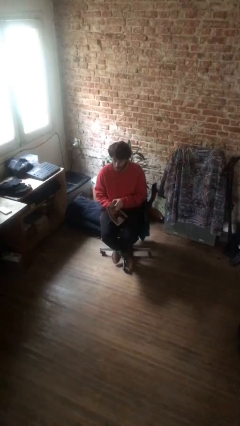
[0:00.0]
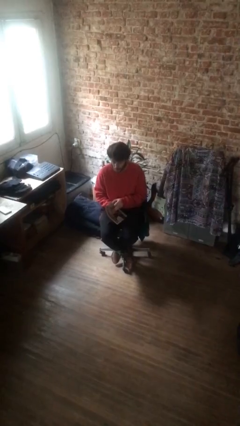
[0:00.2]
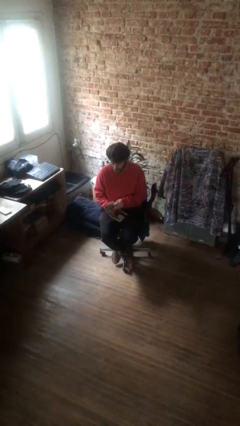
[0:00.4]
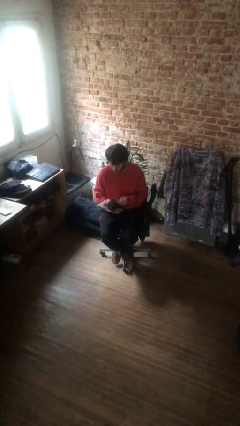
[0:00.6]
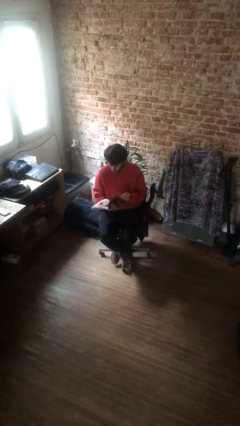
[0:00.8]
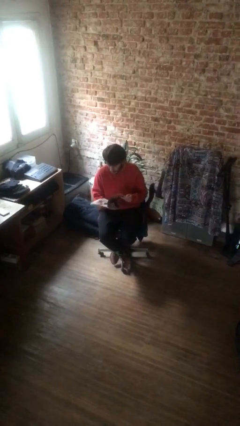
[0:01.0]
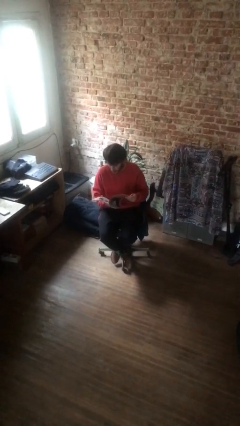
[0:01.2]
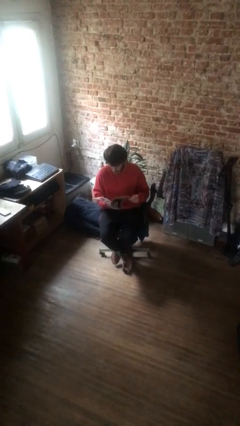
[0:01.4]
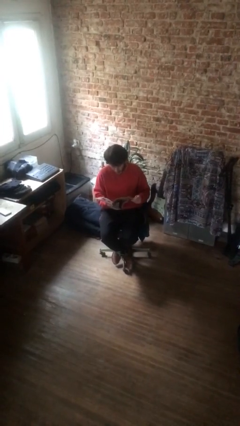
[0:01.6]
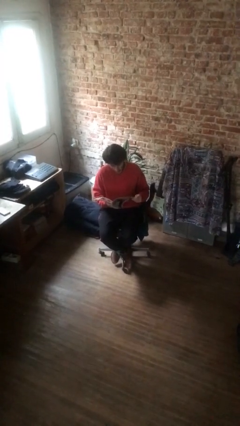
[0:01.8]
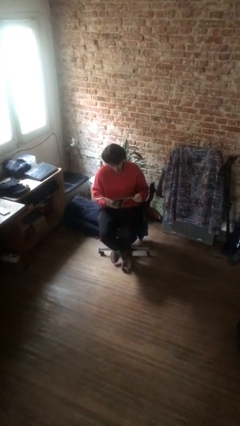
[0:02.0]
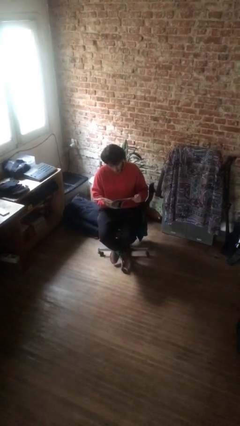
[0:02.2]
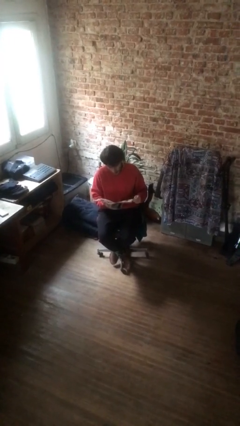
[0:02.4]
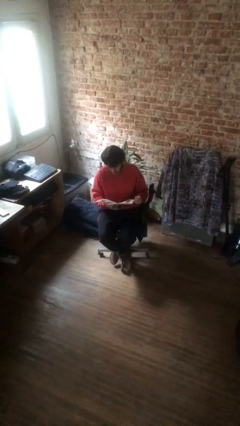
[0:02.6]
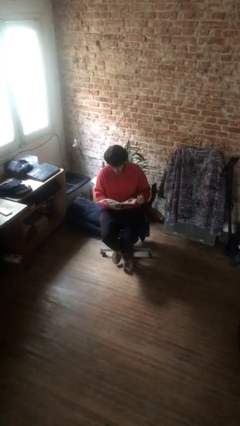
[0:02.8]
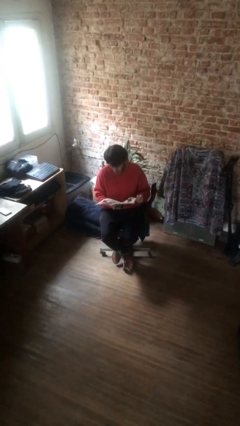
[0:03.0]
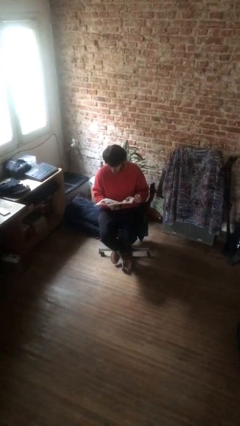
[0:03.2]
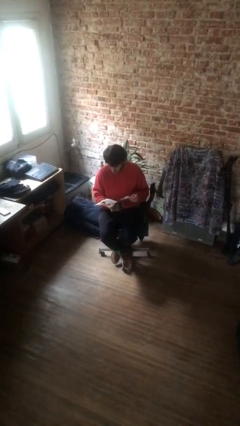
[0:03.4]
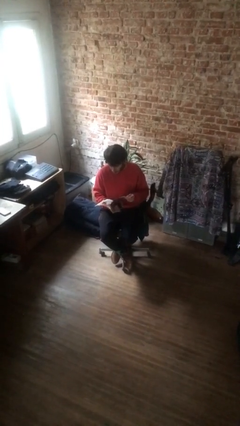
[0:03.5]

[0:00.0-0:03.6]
person reads magazine

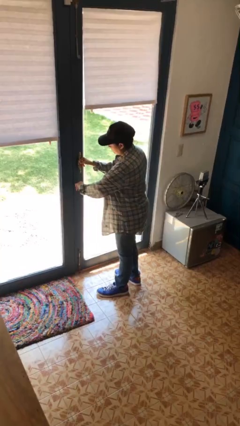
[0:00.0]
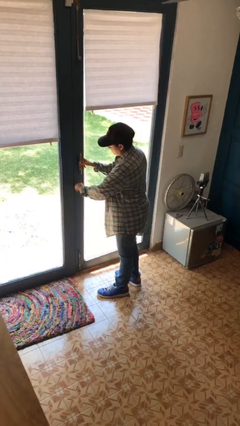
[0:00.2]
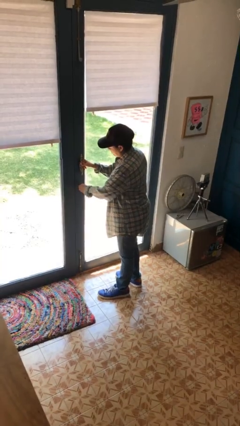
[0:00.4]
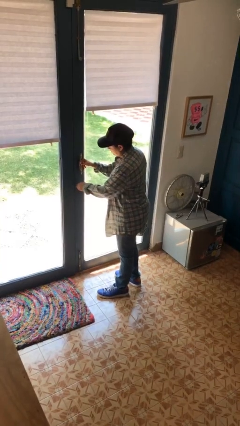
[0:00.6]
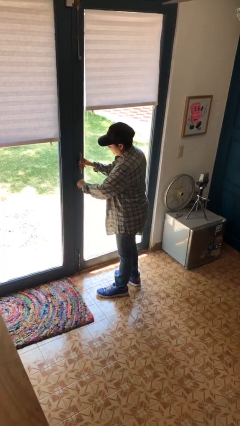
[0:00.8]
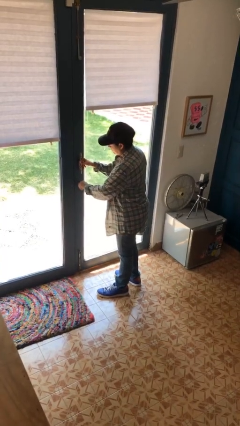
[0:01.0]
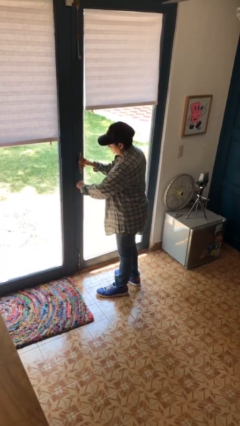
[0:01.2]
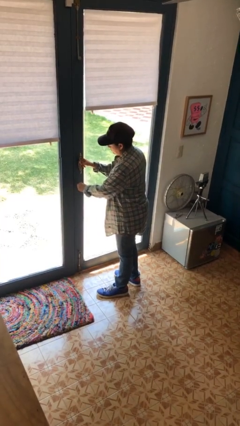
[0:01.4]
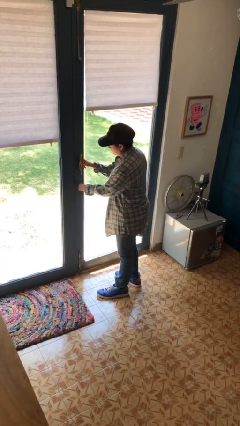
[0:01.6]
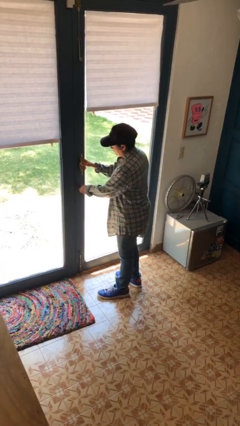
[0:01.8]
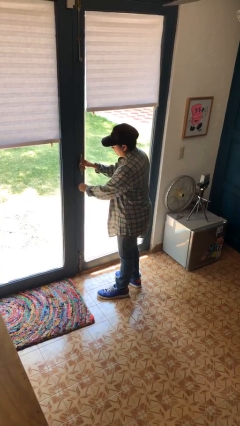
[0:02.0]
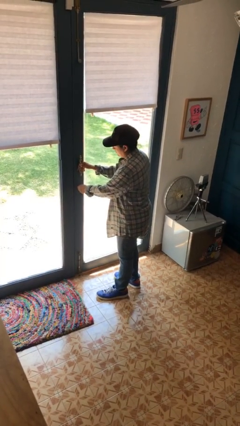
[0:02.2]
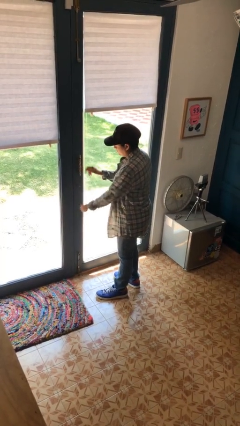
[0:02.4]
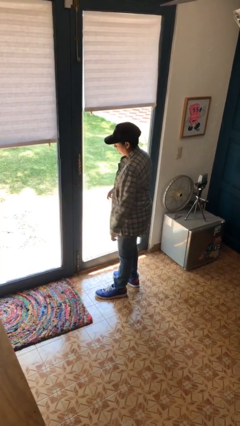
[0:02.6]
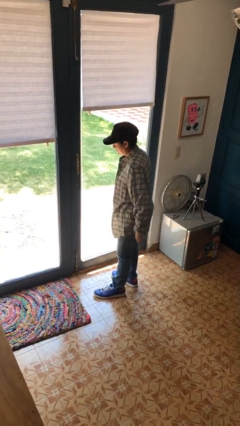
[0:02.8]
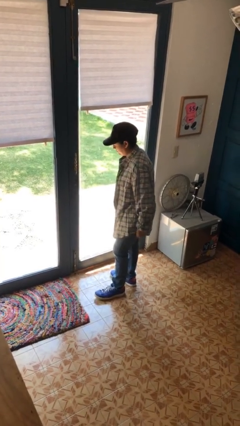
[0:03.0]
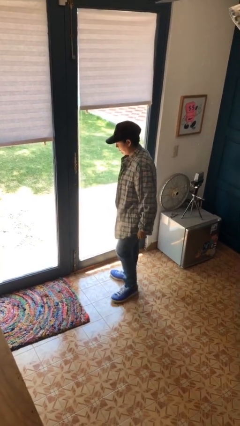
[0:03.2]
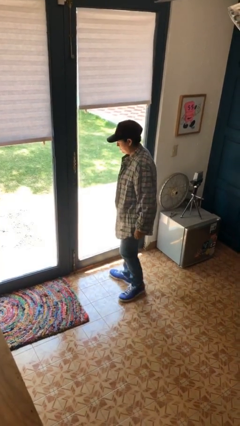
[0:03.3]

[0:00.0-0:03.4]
person locks door with keys

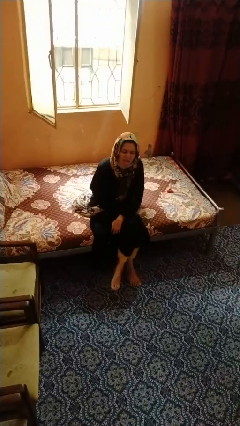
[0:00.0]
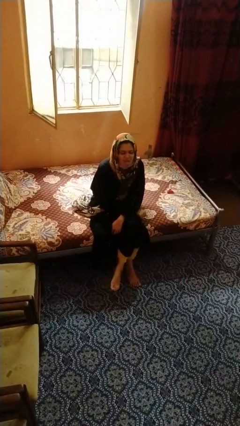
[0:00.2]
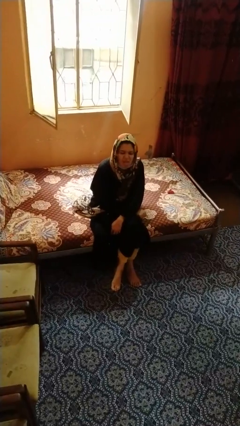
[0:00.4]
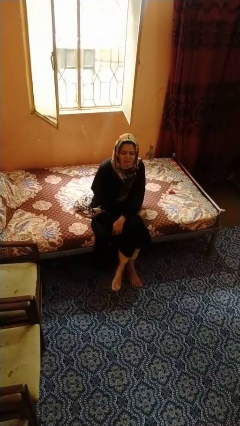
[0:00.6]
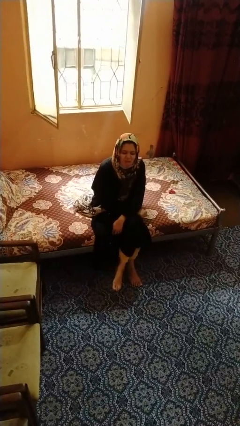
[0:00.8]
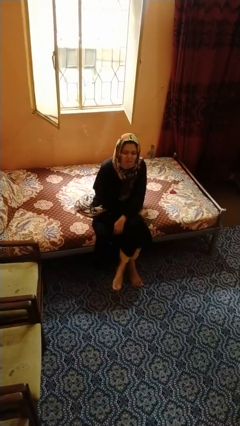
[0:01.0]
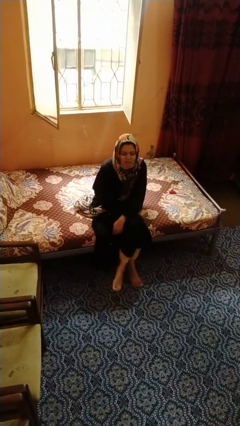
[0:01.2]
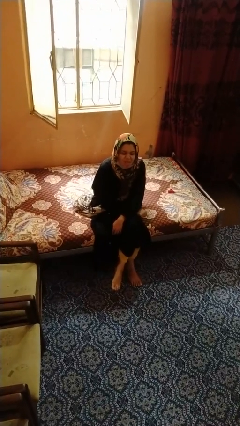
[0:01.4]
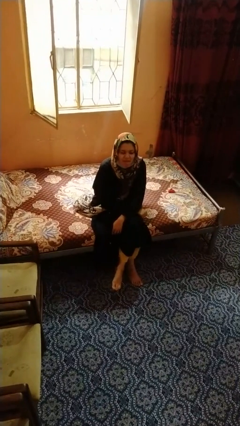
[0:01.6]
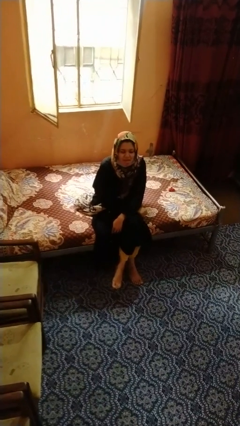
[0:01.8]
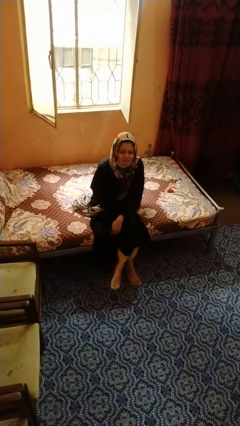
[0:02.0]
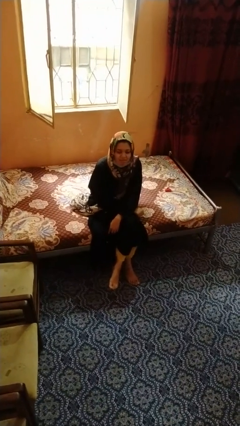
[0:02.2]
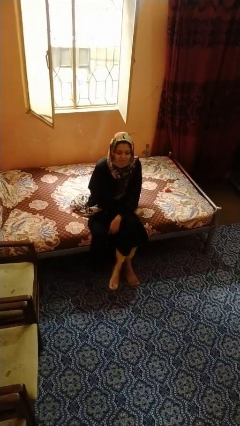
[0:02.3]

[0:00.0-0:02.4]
person sticks out tongue

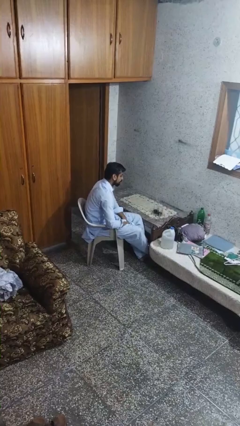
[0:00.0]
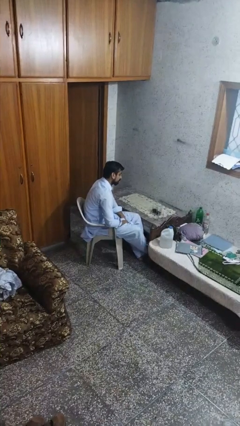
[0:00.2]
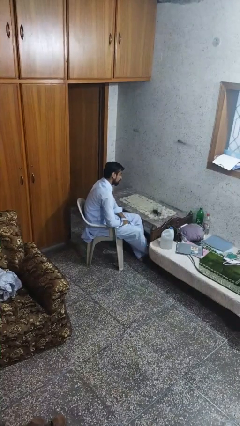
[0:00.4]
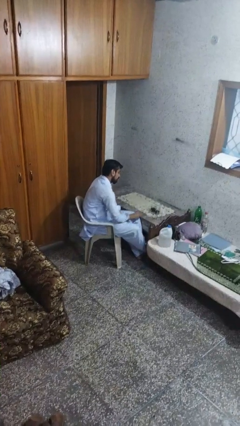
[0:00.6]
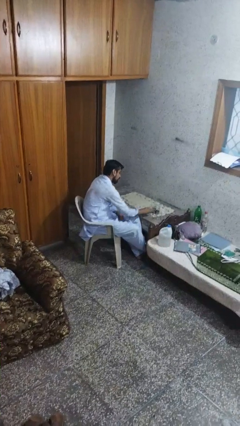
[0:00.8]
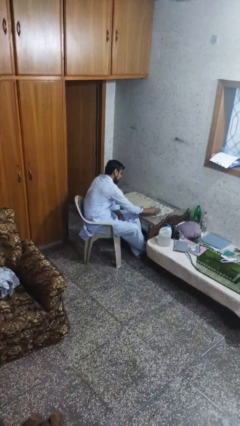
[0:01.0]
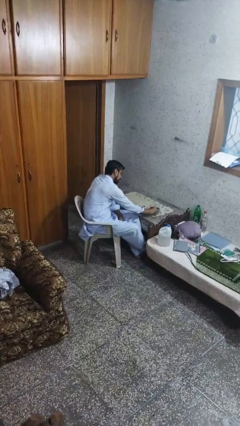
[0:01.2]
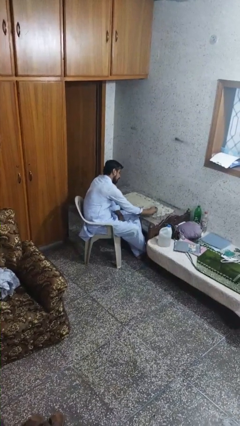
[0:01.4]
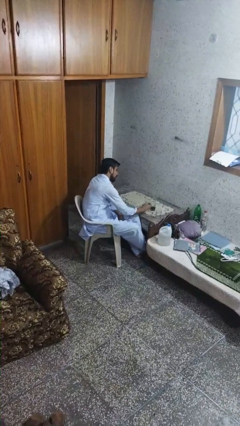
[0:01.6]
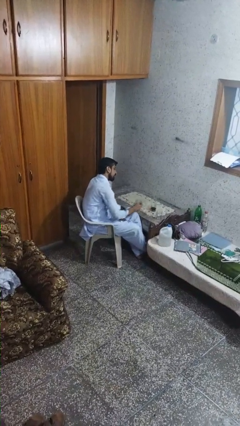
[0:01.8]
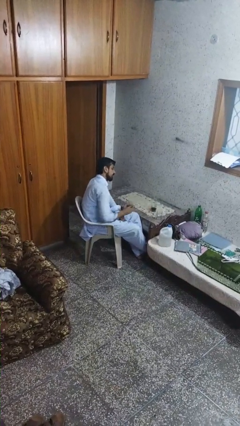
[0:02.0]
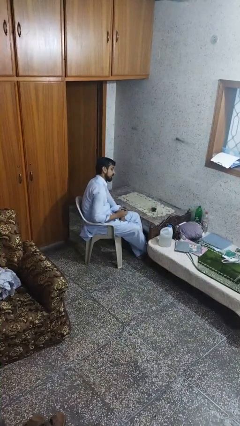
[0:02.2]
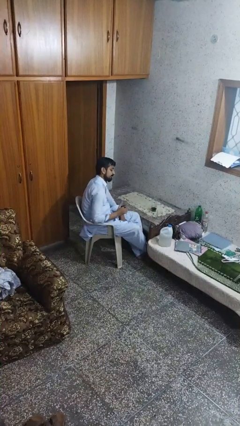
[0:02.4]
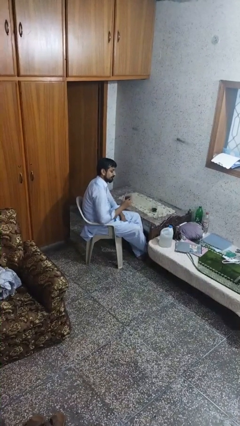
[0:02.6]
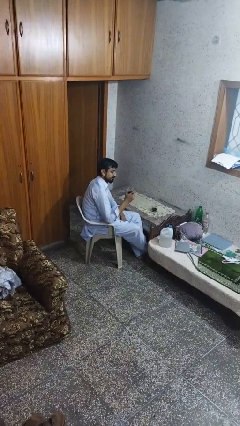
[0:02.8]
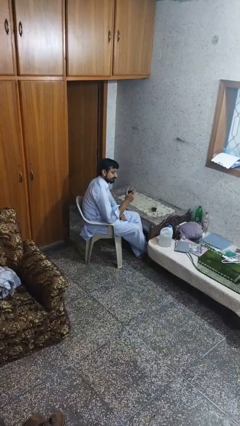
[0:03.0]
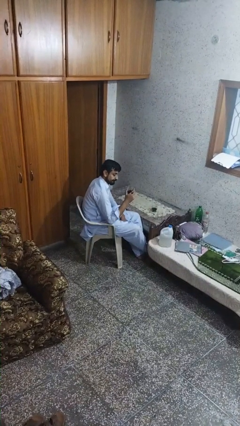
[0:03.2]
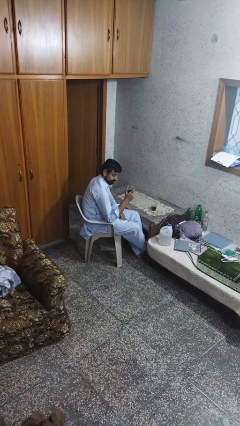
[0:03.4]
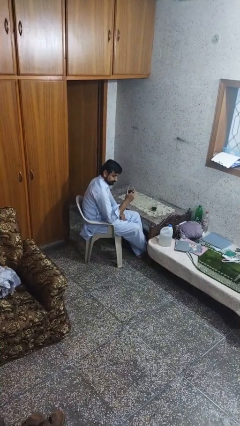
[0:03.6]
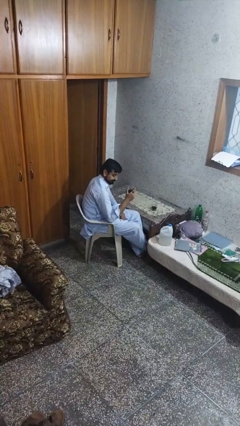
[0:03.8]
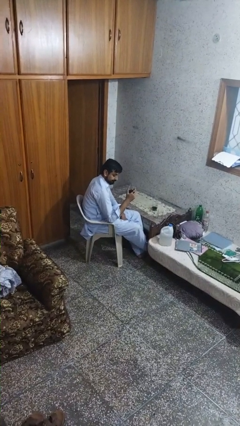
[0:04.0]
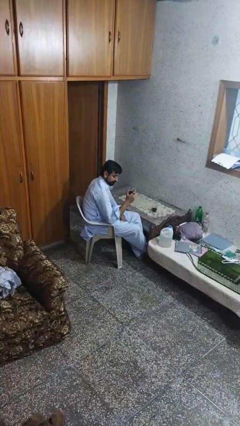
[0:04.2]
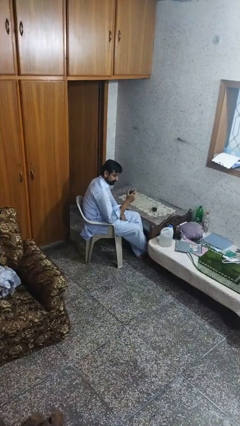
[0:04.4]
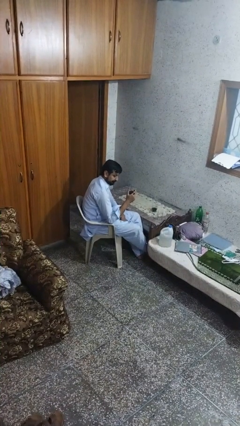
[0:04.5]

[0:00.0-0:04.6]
person picks up object from table

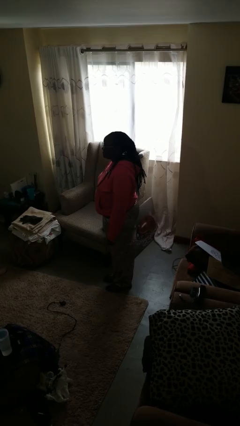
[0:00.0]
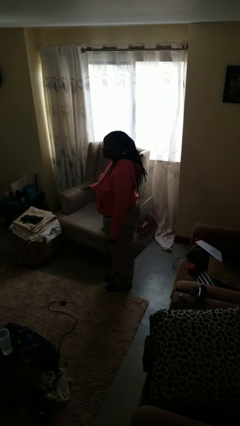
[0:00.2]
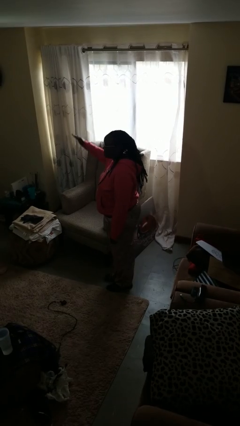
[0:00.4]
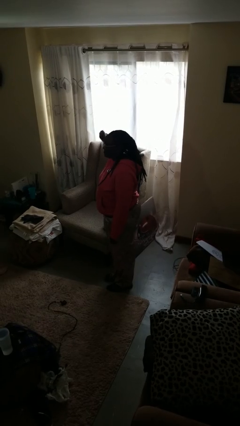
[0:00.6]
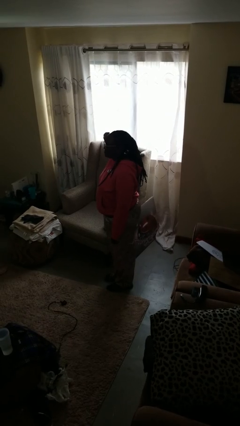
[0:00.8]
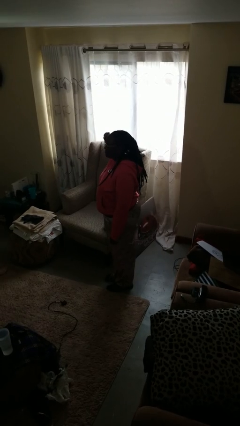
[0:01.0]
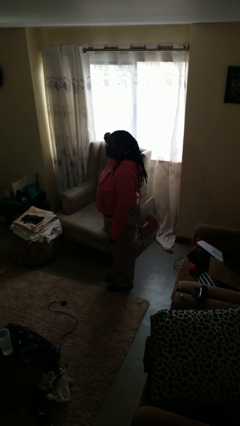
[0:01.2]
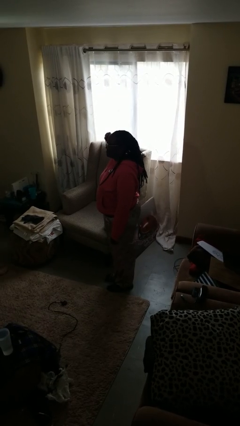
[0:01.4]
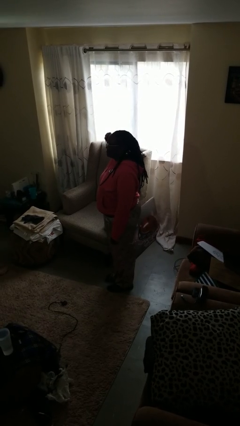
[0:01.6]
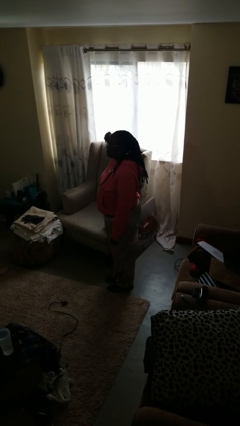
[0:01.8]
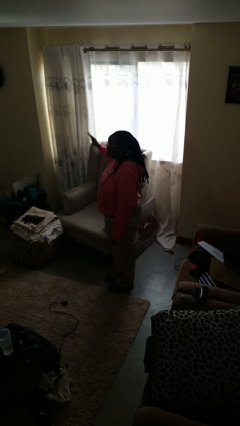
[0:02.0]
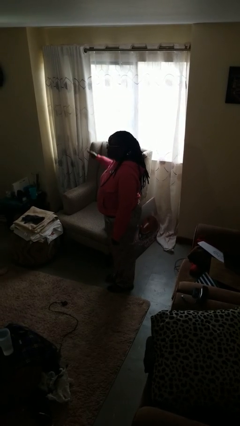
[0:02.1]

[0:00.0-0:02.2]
person salutes

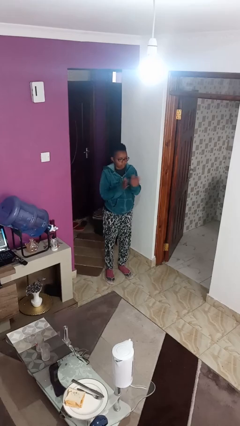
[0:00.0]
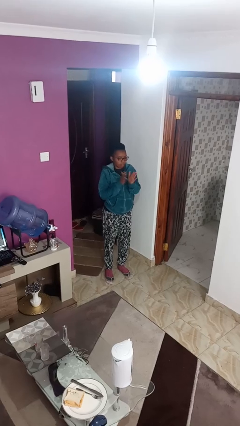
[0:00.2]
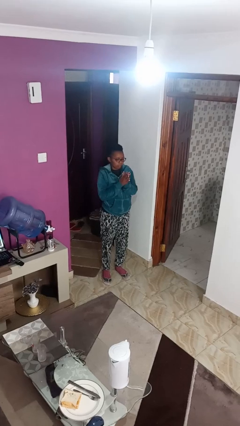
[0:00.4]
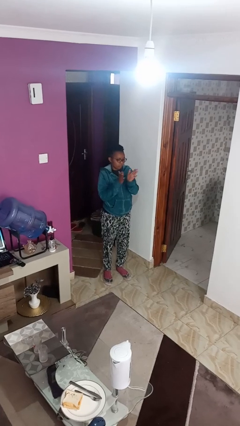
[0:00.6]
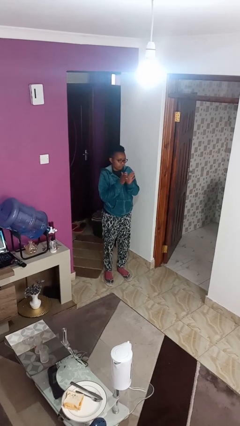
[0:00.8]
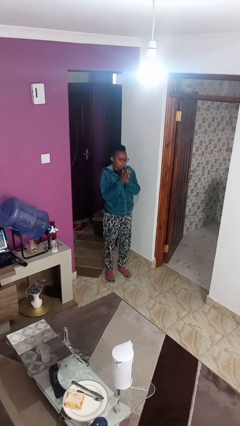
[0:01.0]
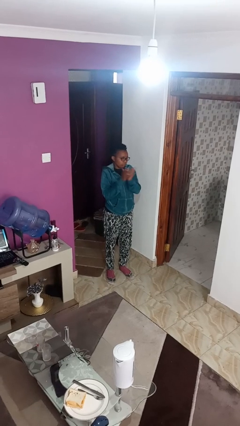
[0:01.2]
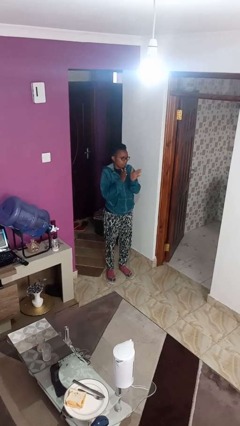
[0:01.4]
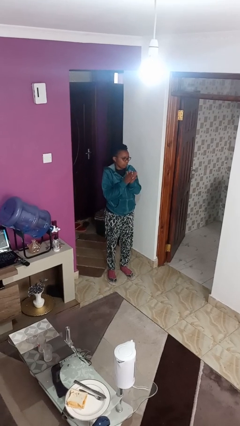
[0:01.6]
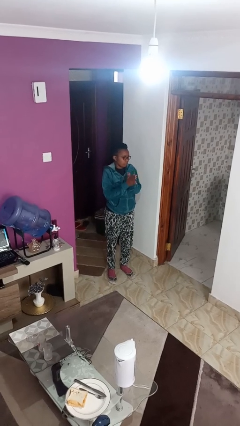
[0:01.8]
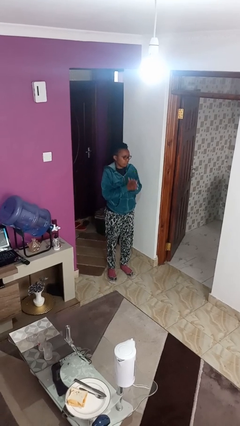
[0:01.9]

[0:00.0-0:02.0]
person claps hands
